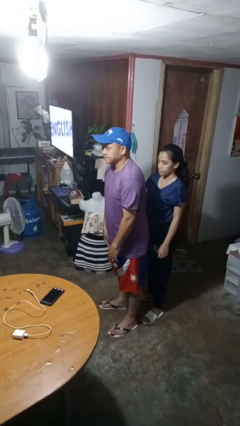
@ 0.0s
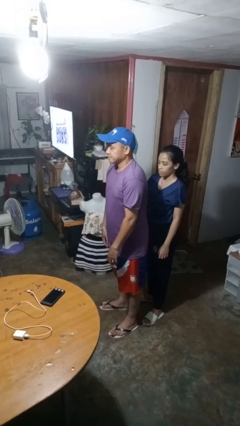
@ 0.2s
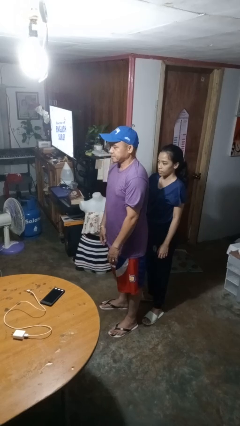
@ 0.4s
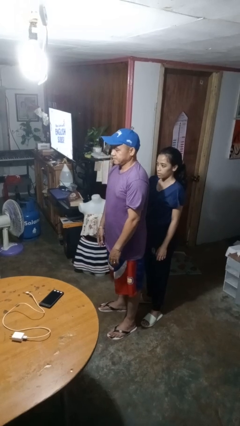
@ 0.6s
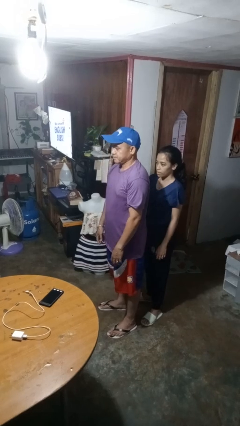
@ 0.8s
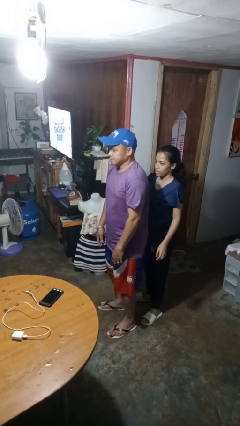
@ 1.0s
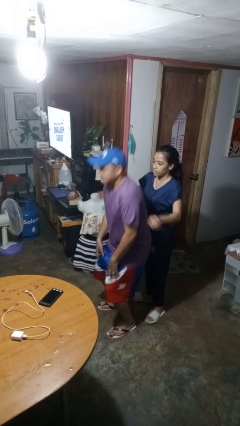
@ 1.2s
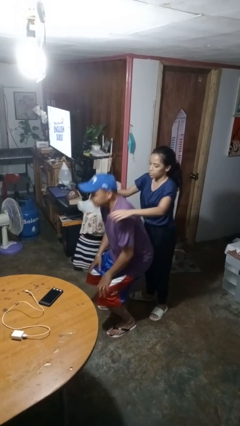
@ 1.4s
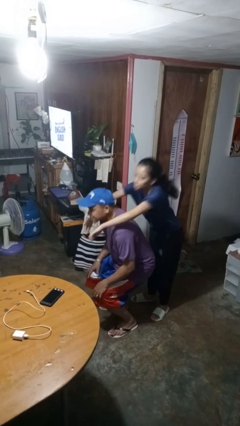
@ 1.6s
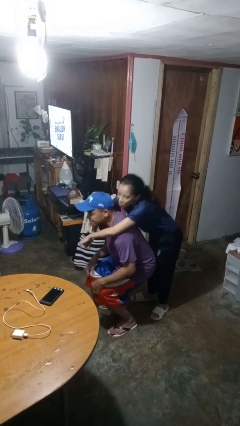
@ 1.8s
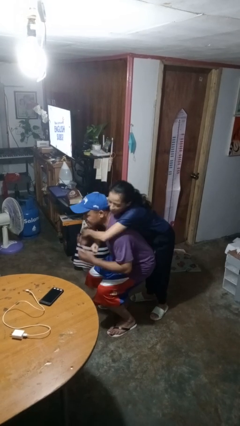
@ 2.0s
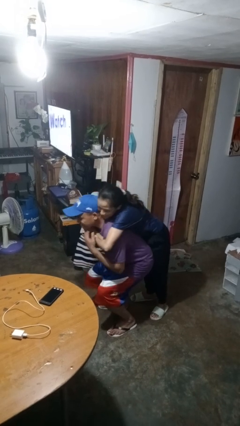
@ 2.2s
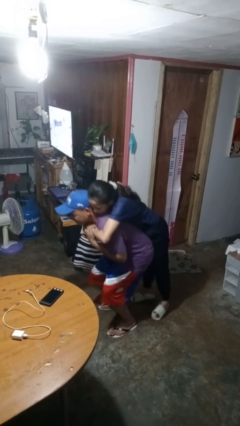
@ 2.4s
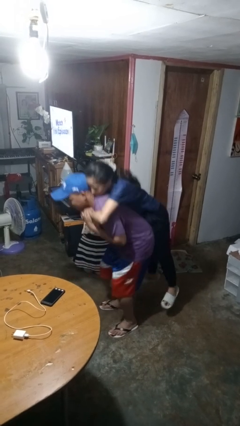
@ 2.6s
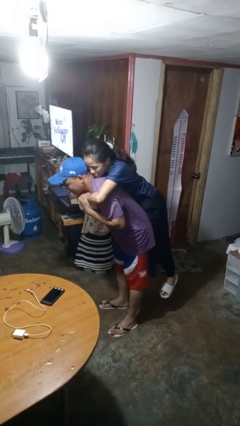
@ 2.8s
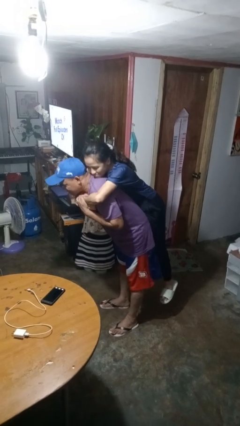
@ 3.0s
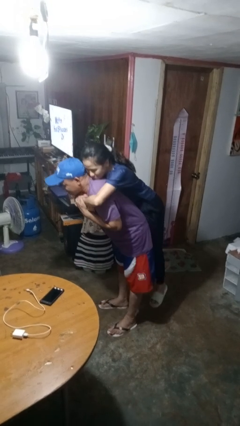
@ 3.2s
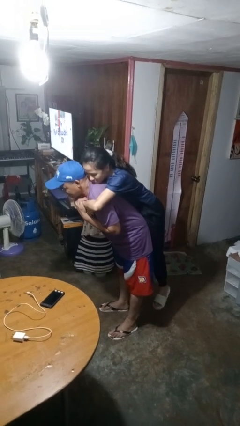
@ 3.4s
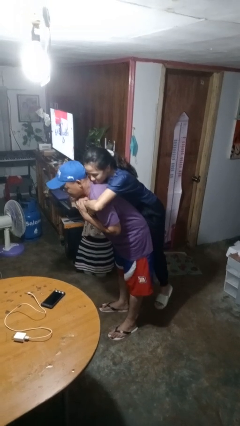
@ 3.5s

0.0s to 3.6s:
person picks up person

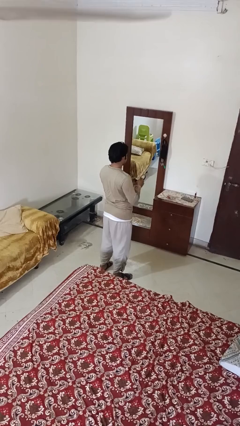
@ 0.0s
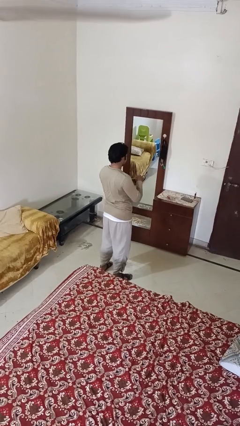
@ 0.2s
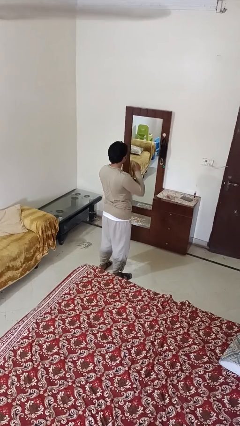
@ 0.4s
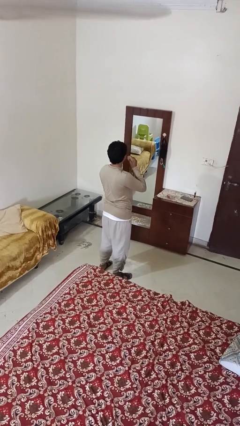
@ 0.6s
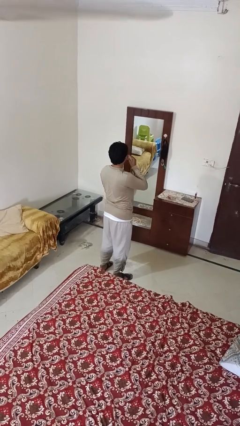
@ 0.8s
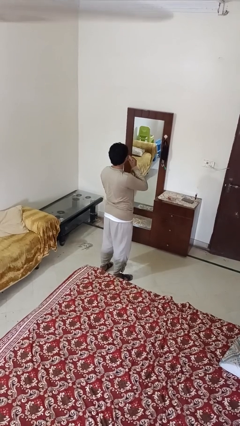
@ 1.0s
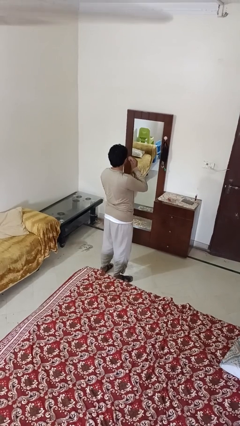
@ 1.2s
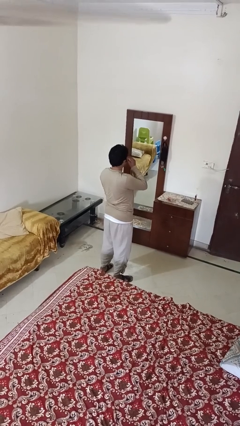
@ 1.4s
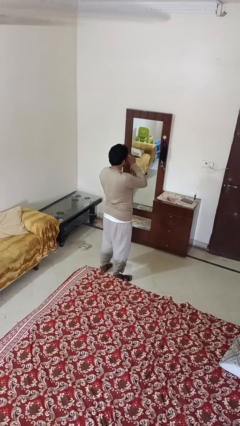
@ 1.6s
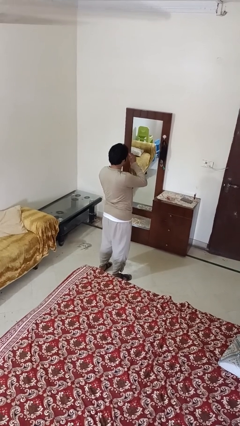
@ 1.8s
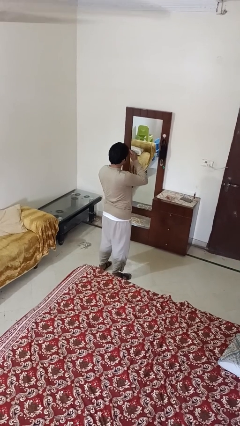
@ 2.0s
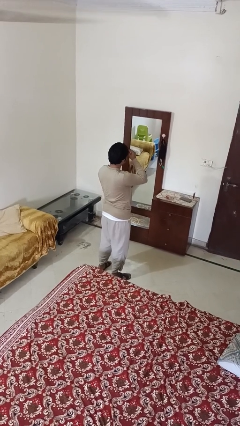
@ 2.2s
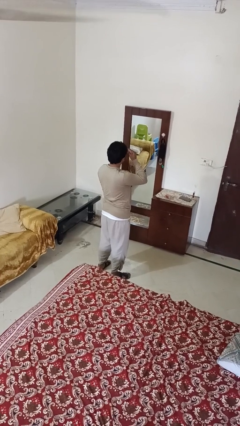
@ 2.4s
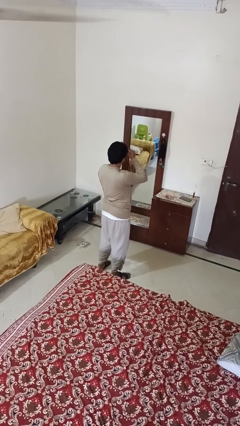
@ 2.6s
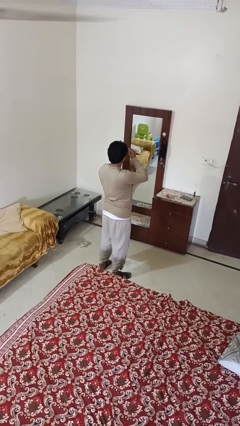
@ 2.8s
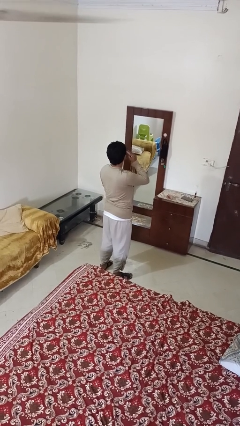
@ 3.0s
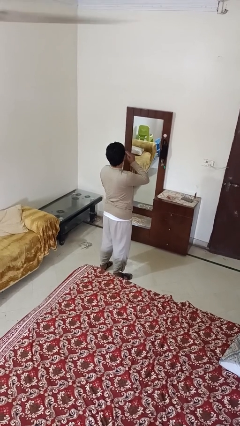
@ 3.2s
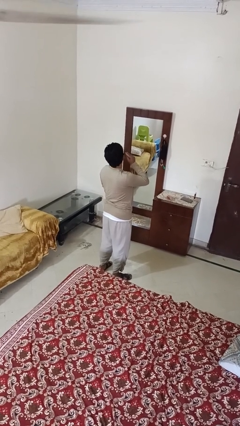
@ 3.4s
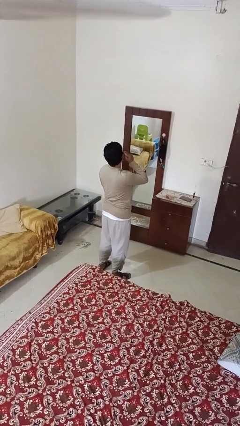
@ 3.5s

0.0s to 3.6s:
person applies foundation makeup

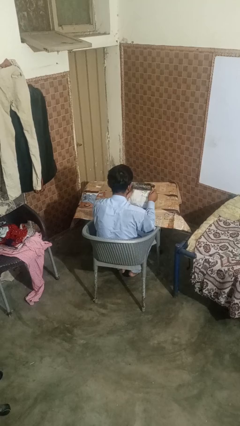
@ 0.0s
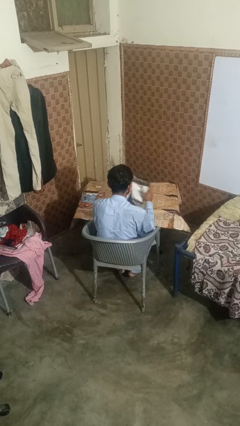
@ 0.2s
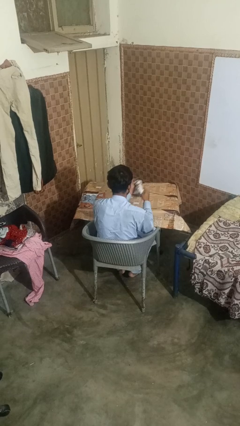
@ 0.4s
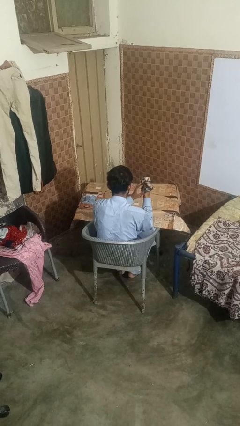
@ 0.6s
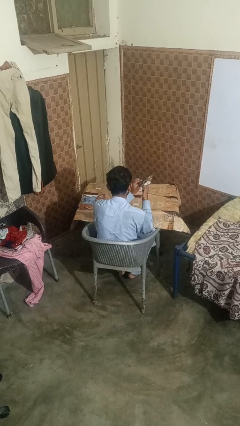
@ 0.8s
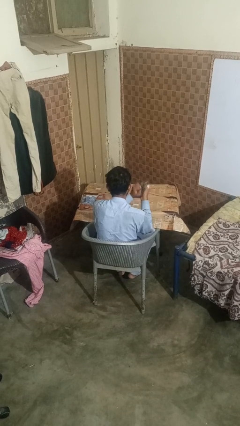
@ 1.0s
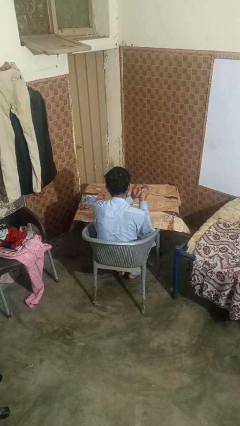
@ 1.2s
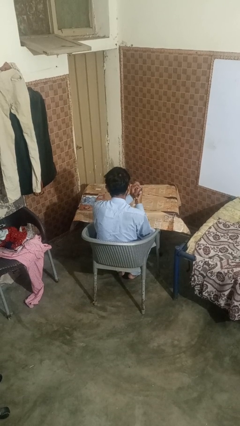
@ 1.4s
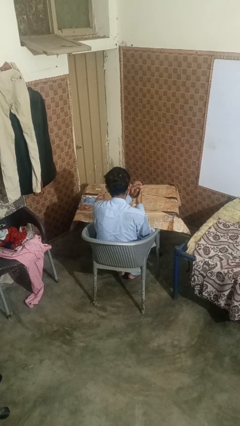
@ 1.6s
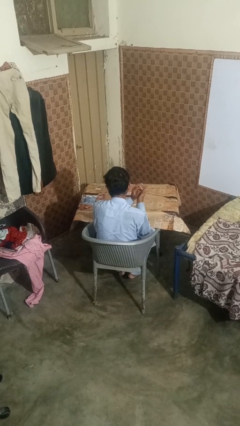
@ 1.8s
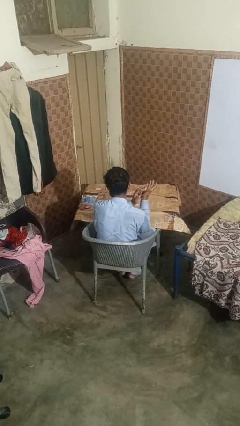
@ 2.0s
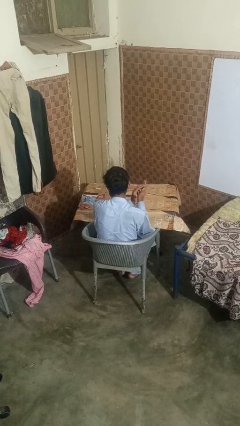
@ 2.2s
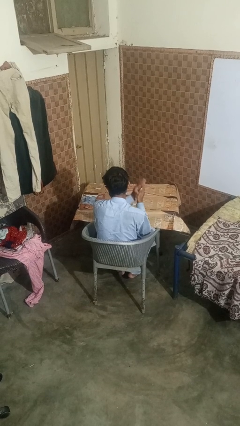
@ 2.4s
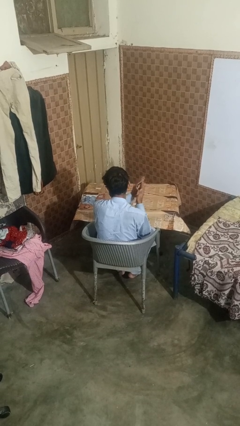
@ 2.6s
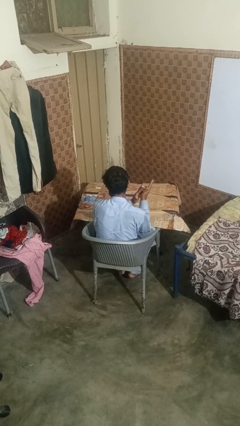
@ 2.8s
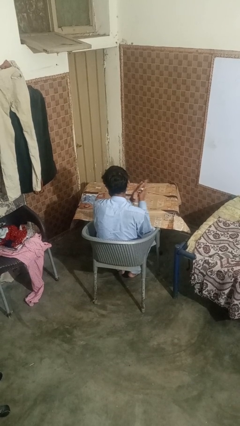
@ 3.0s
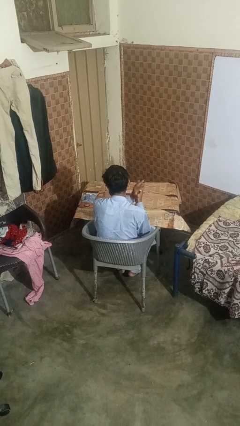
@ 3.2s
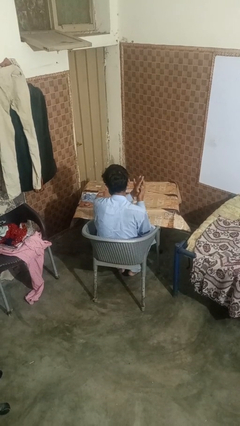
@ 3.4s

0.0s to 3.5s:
person crumples paper

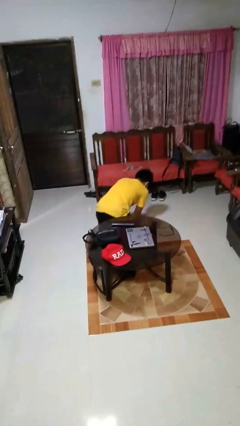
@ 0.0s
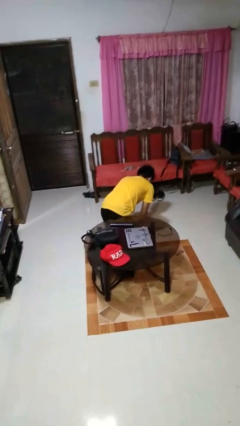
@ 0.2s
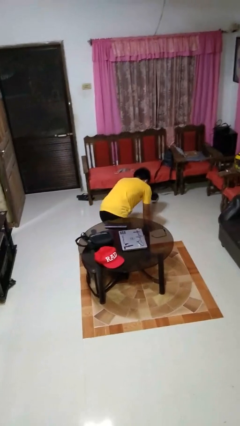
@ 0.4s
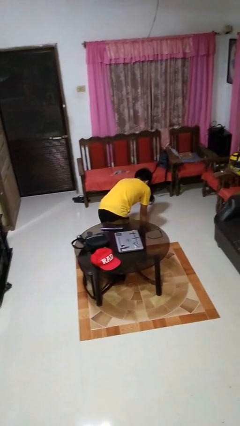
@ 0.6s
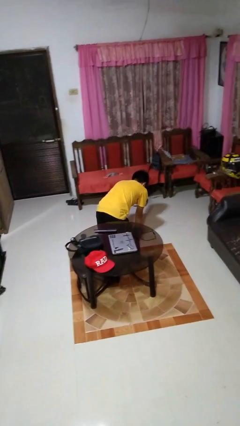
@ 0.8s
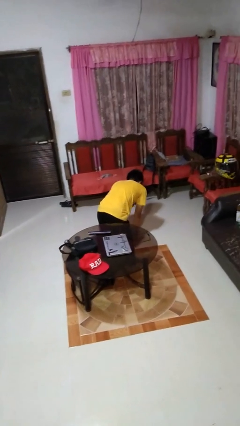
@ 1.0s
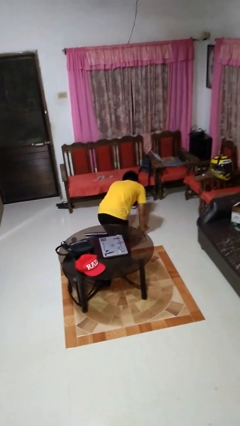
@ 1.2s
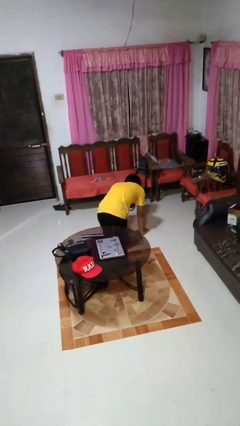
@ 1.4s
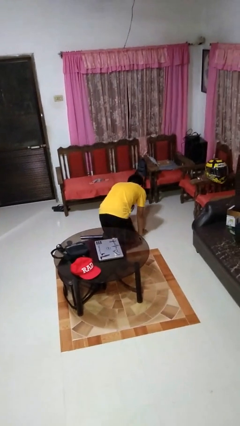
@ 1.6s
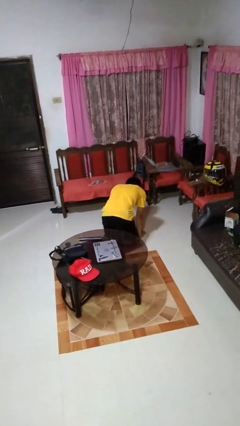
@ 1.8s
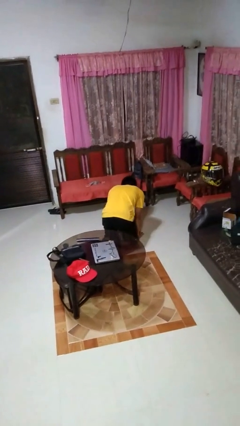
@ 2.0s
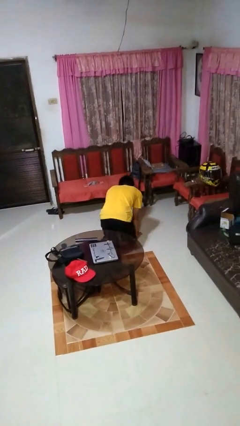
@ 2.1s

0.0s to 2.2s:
person crawls

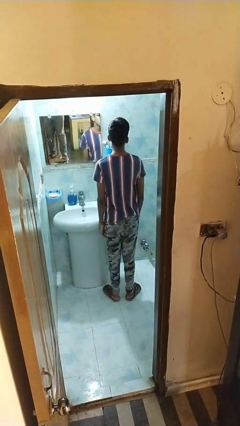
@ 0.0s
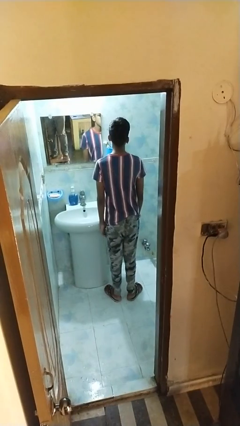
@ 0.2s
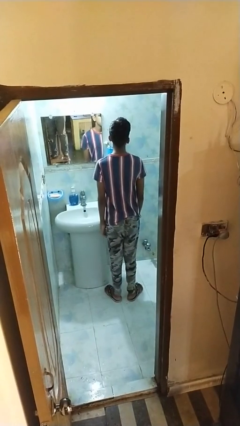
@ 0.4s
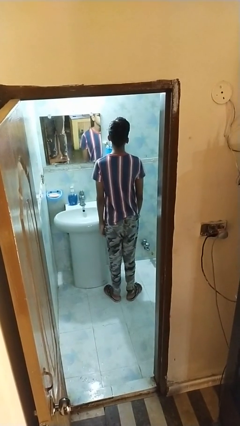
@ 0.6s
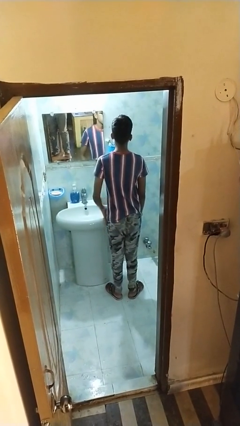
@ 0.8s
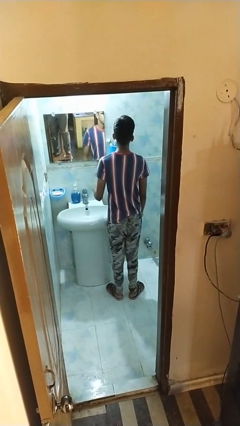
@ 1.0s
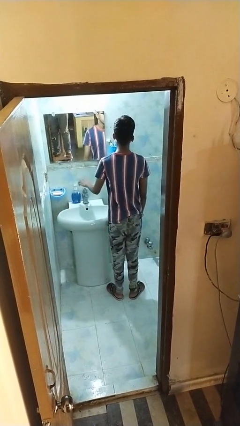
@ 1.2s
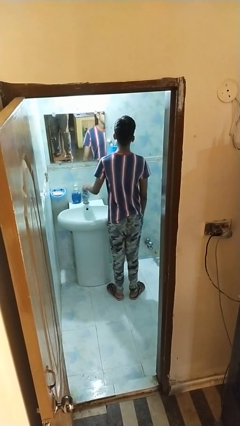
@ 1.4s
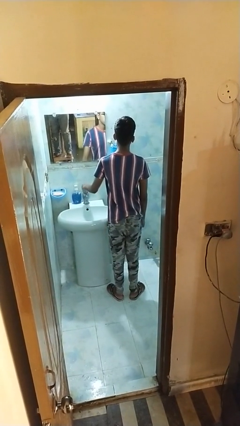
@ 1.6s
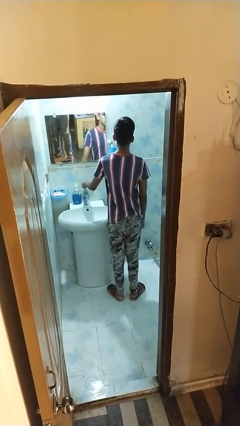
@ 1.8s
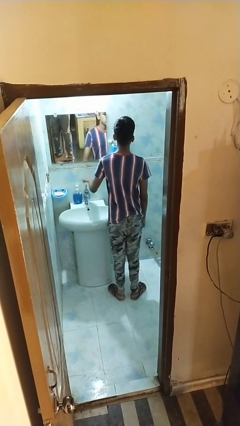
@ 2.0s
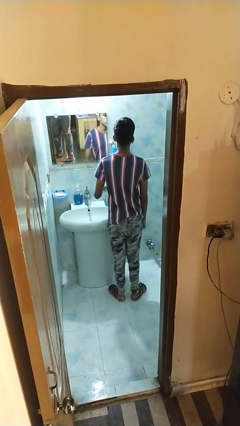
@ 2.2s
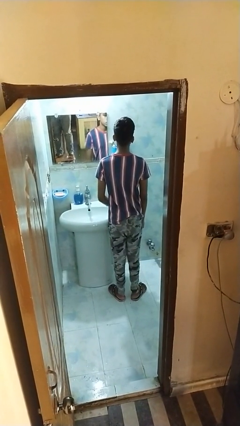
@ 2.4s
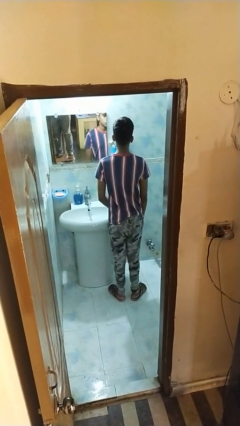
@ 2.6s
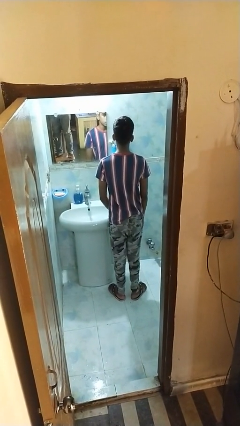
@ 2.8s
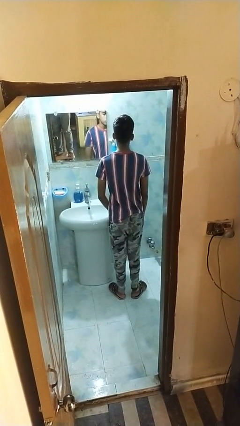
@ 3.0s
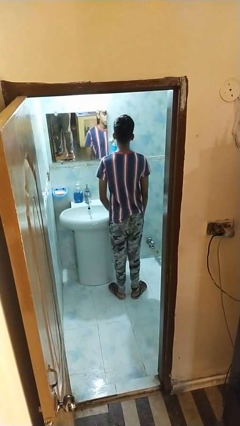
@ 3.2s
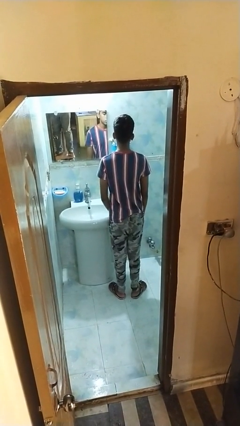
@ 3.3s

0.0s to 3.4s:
person turns on faucet

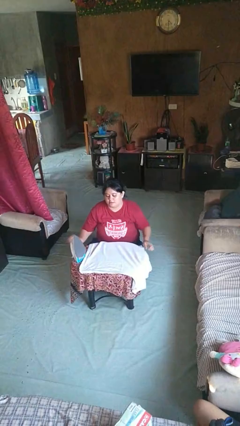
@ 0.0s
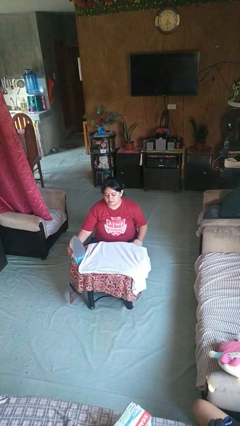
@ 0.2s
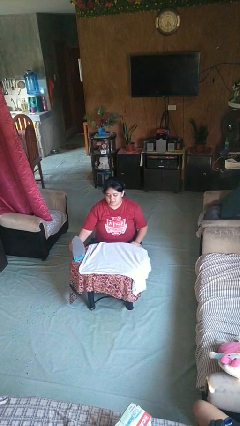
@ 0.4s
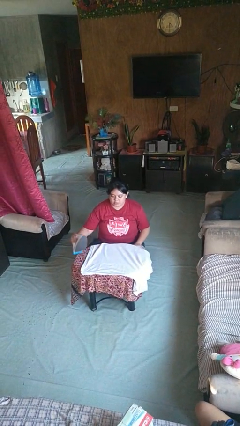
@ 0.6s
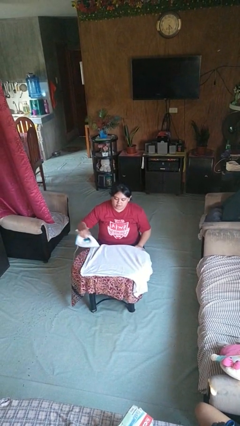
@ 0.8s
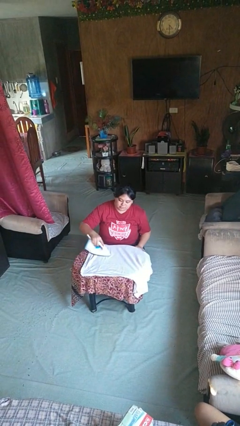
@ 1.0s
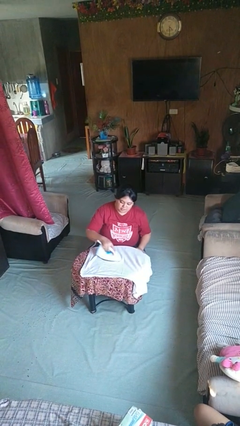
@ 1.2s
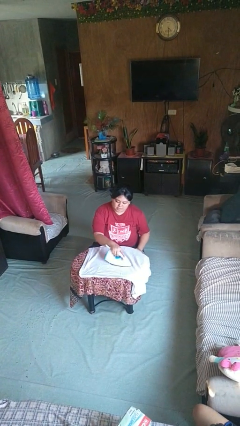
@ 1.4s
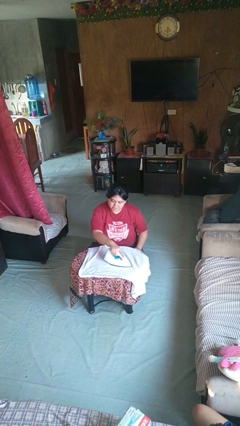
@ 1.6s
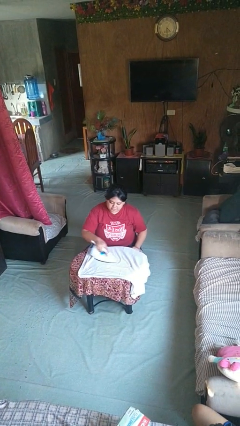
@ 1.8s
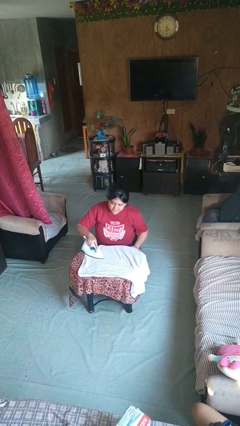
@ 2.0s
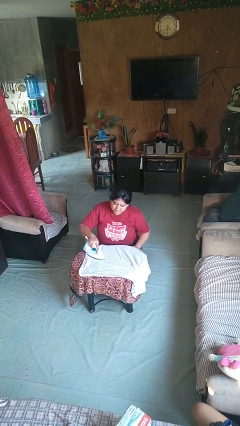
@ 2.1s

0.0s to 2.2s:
person irons clothes
